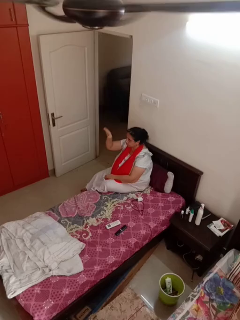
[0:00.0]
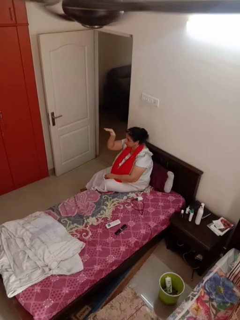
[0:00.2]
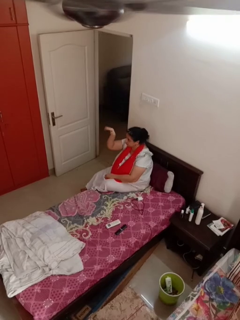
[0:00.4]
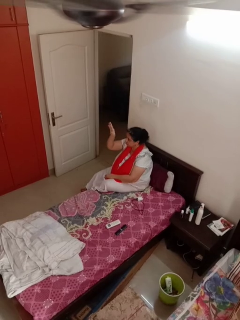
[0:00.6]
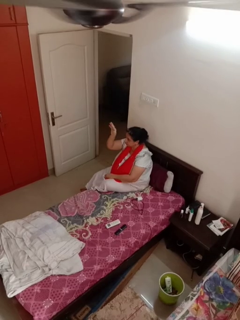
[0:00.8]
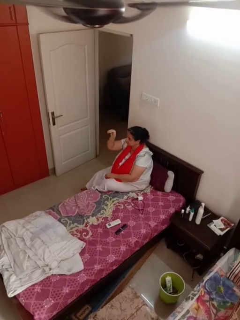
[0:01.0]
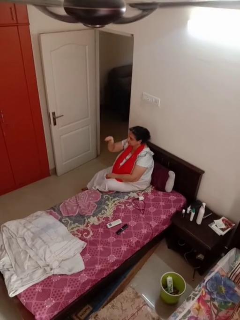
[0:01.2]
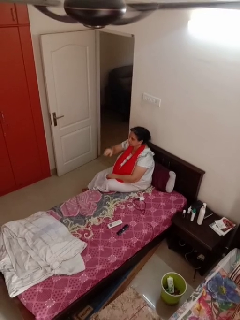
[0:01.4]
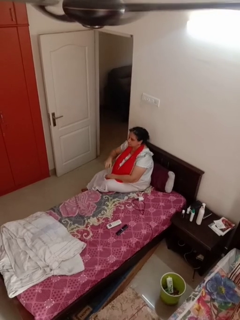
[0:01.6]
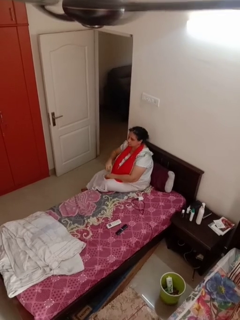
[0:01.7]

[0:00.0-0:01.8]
person gestures come here

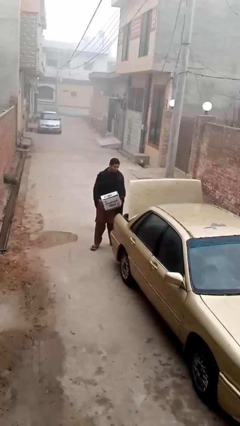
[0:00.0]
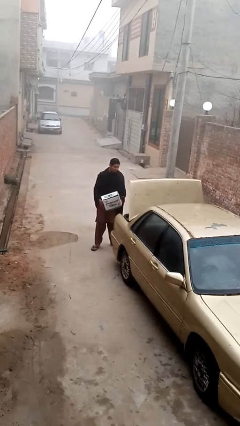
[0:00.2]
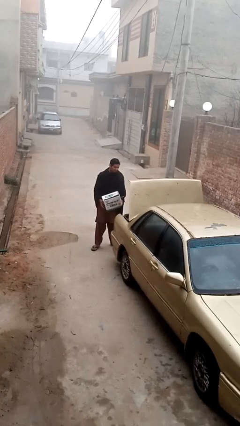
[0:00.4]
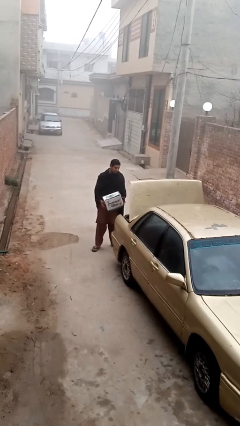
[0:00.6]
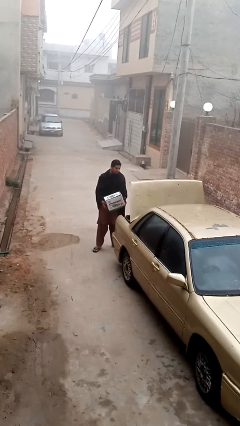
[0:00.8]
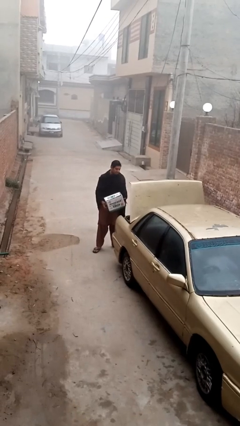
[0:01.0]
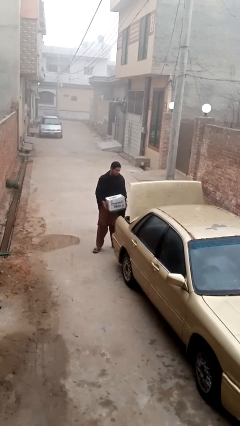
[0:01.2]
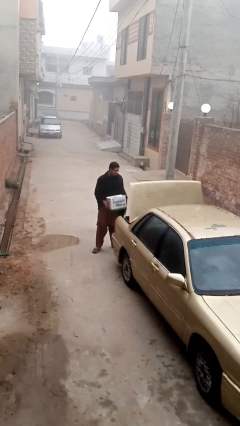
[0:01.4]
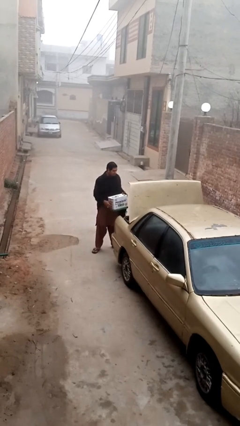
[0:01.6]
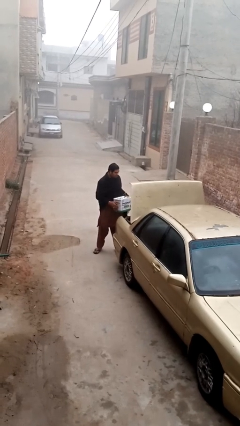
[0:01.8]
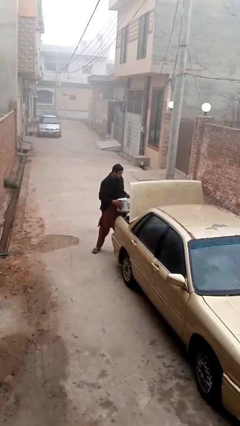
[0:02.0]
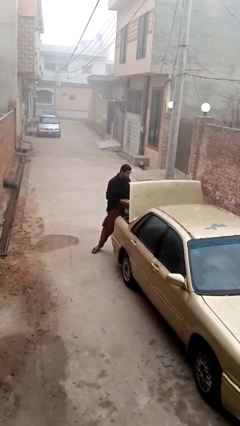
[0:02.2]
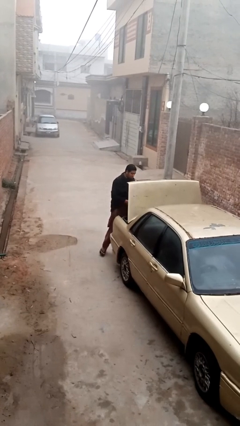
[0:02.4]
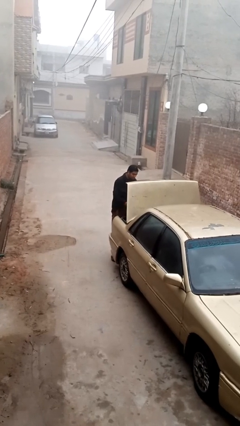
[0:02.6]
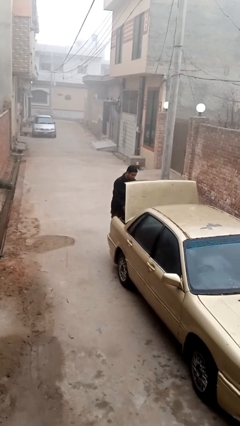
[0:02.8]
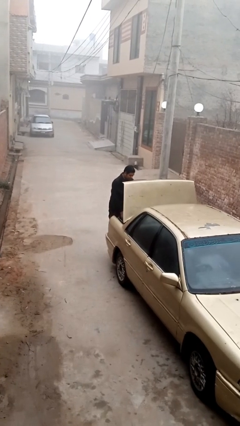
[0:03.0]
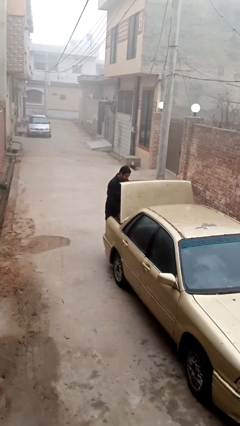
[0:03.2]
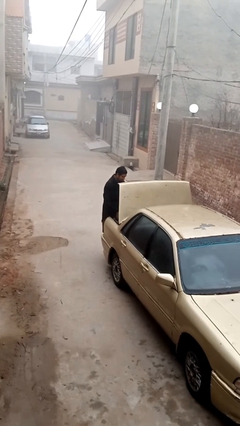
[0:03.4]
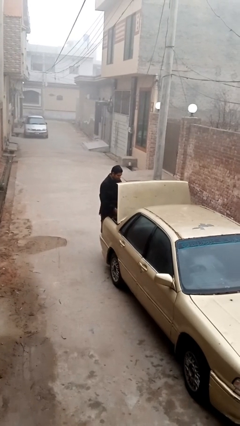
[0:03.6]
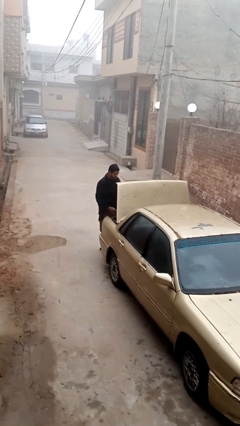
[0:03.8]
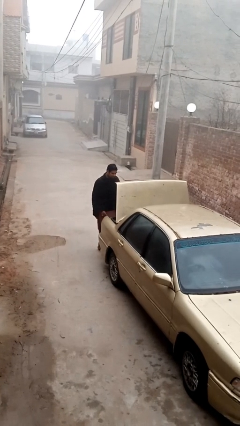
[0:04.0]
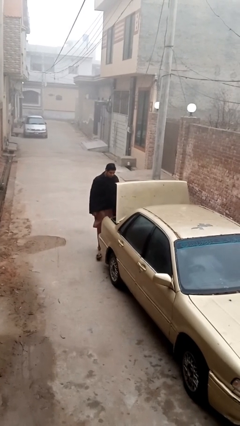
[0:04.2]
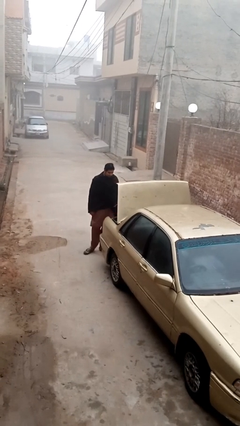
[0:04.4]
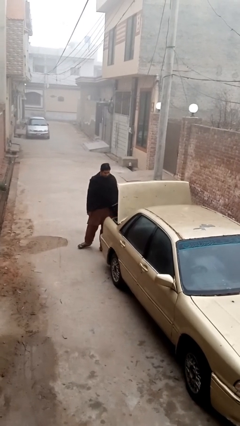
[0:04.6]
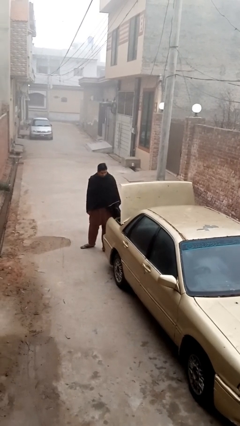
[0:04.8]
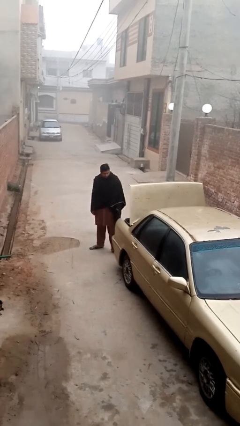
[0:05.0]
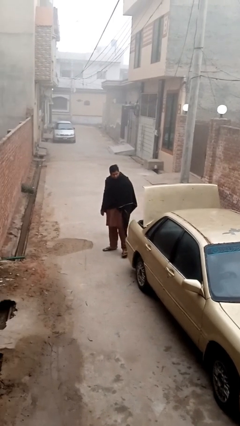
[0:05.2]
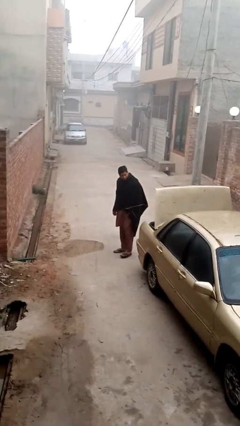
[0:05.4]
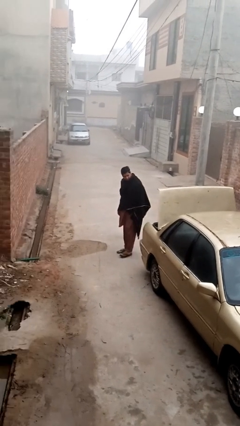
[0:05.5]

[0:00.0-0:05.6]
person loads car

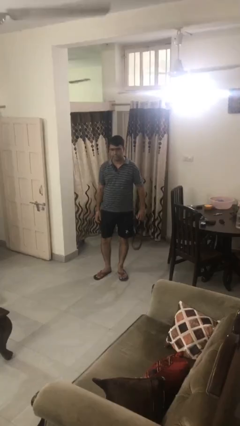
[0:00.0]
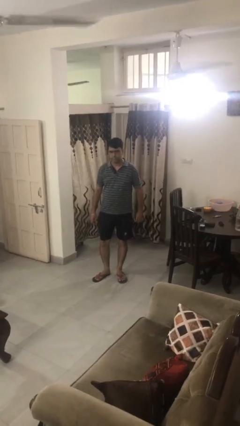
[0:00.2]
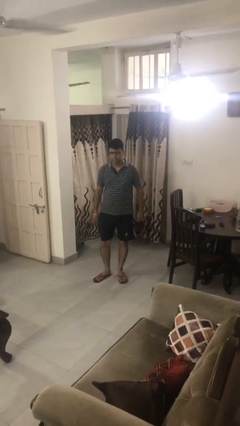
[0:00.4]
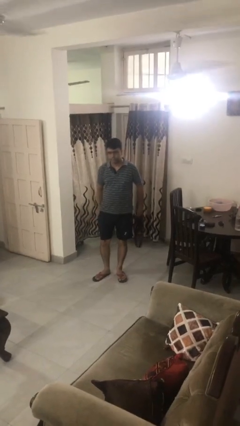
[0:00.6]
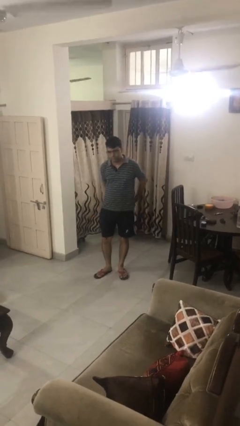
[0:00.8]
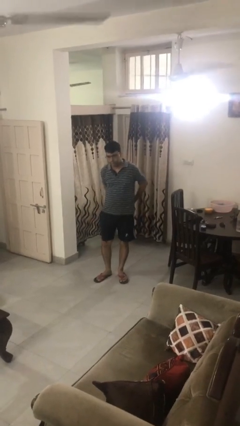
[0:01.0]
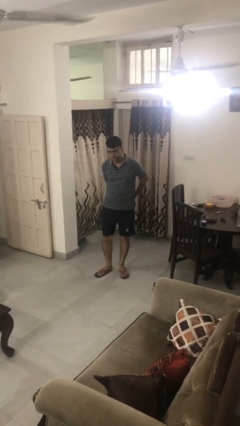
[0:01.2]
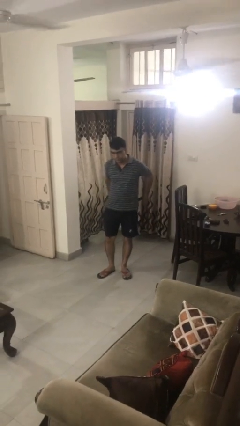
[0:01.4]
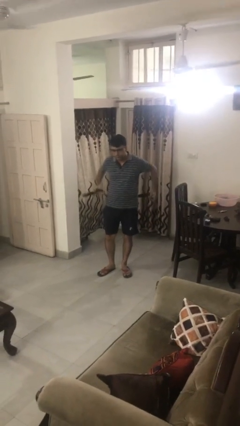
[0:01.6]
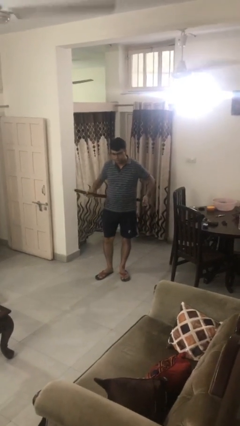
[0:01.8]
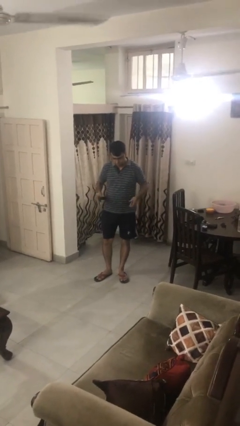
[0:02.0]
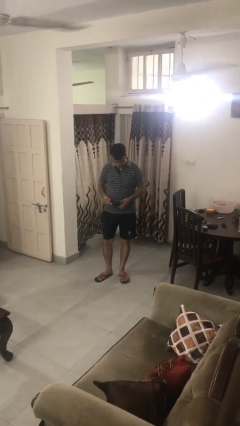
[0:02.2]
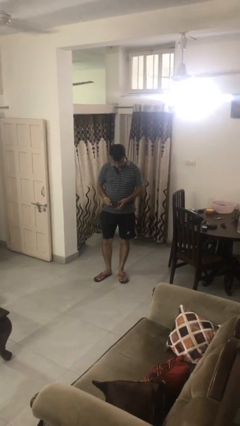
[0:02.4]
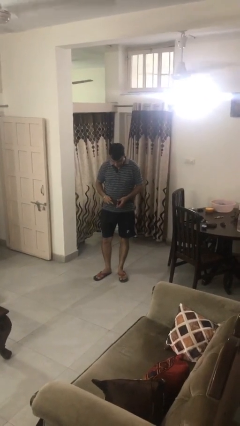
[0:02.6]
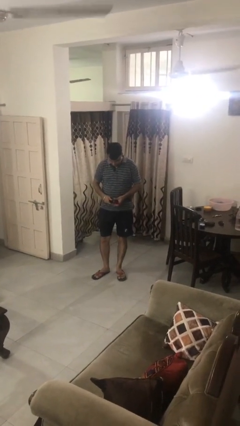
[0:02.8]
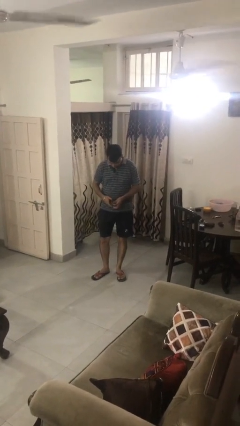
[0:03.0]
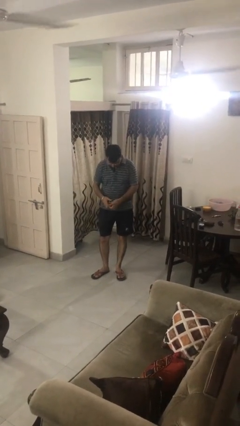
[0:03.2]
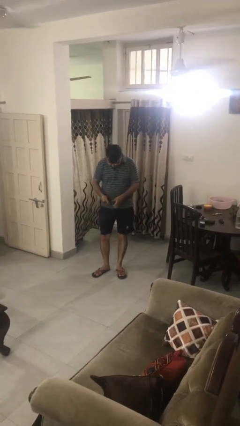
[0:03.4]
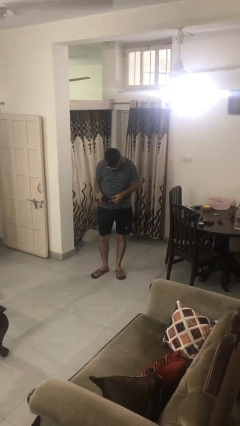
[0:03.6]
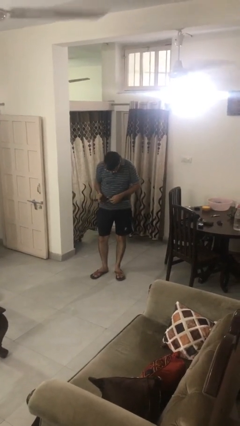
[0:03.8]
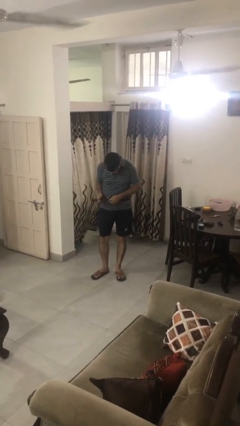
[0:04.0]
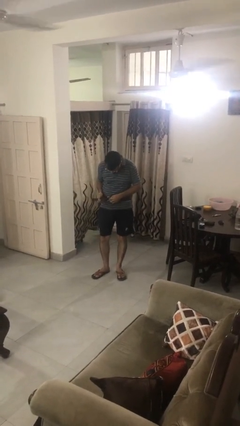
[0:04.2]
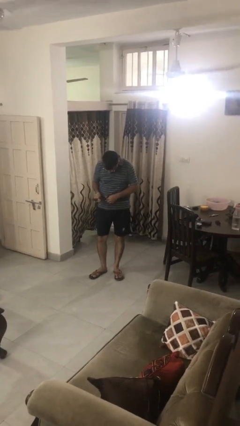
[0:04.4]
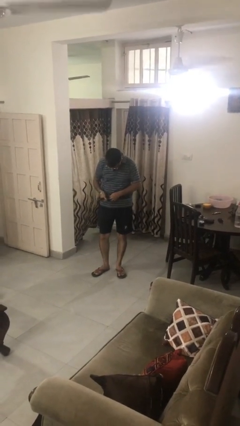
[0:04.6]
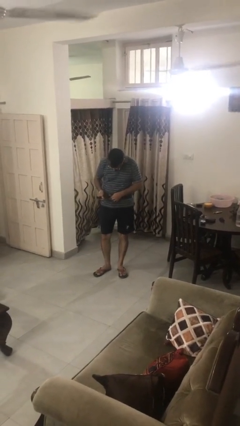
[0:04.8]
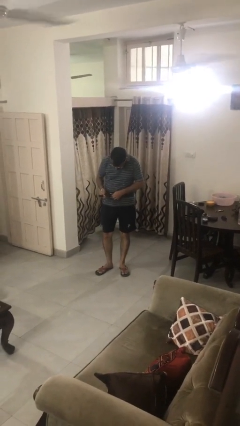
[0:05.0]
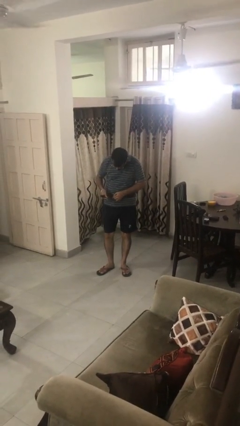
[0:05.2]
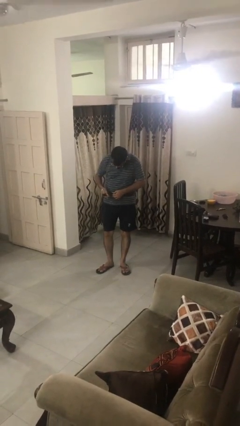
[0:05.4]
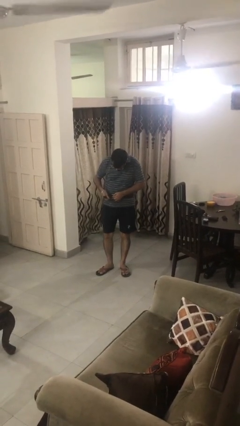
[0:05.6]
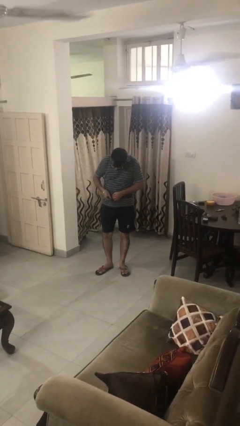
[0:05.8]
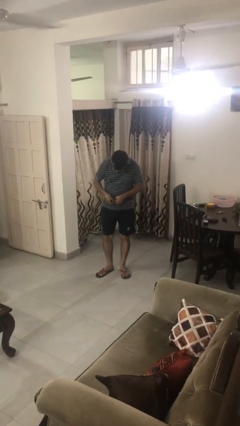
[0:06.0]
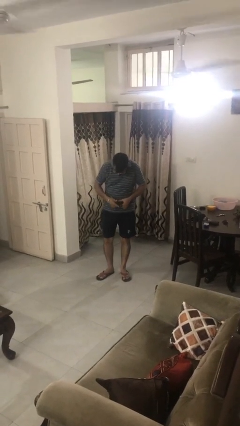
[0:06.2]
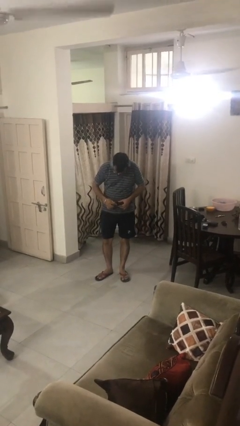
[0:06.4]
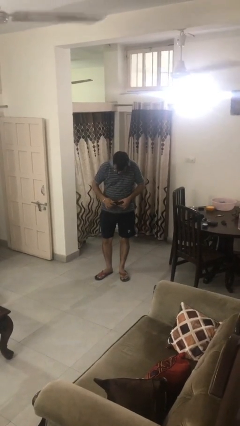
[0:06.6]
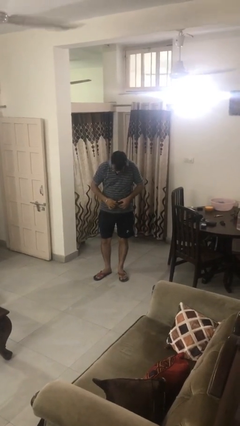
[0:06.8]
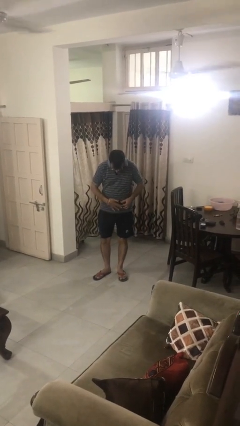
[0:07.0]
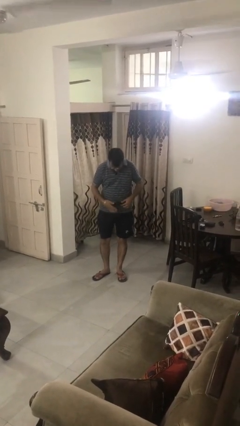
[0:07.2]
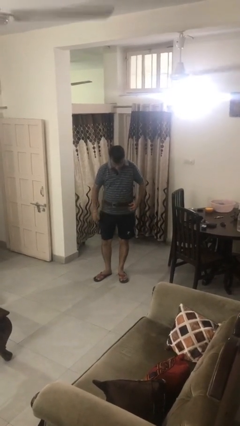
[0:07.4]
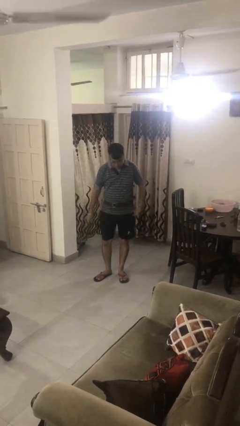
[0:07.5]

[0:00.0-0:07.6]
person puts on belt

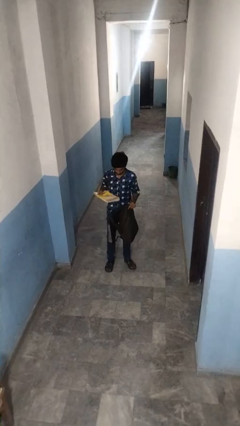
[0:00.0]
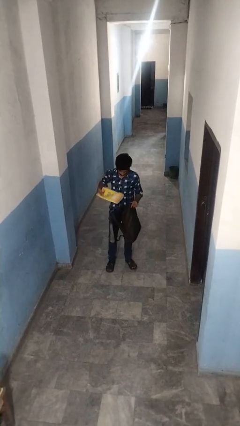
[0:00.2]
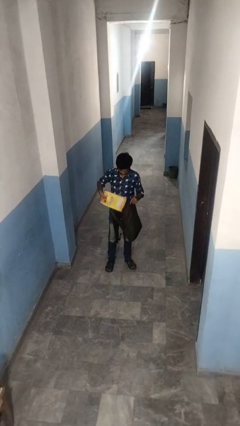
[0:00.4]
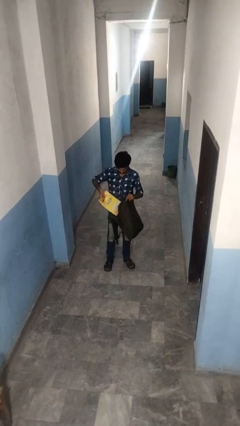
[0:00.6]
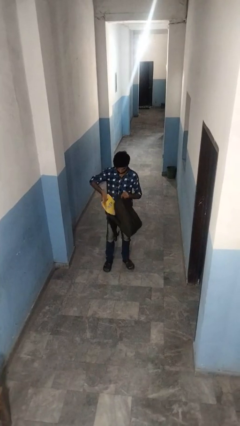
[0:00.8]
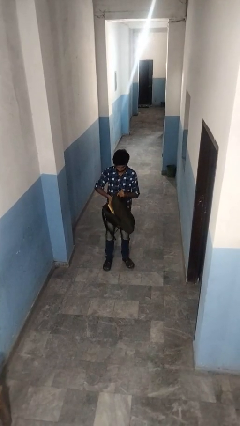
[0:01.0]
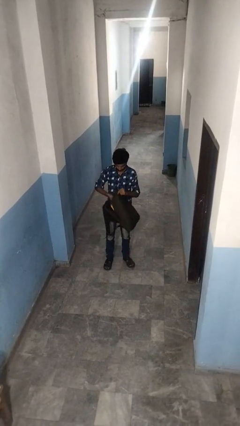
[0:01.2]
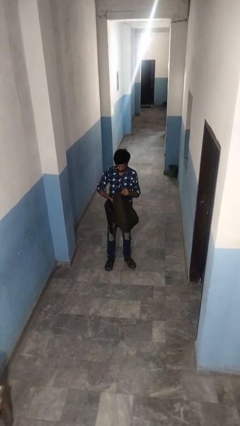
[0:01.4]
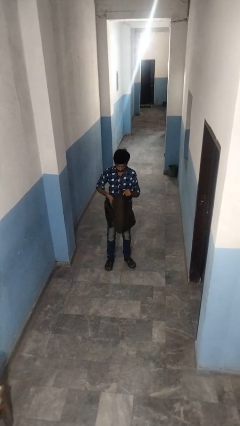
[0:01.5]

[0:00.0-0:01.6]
person puts object into backpack

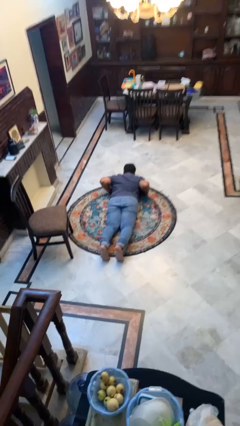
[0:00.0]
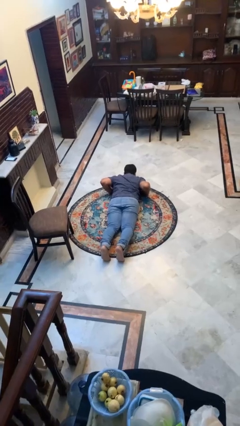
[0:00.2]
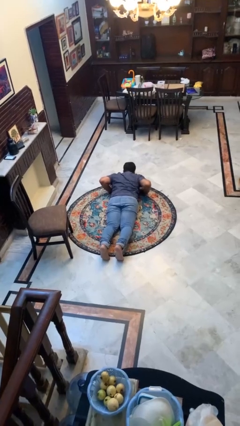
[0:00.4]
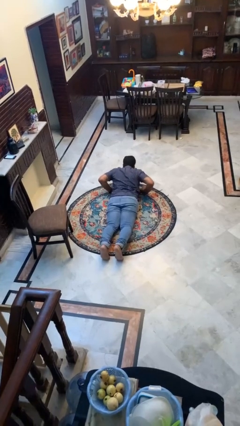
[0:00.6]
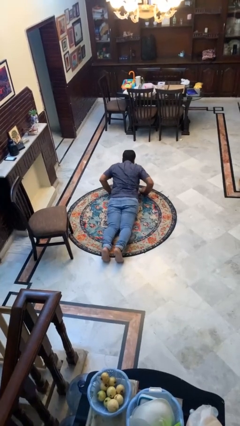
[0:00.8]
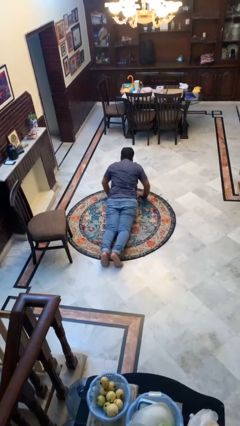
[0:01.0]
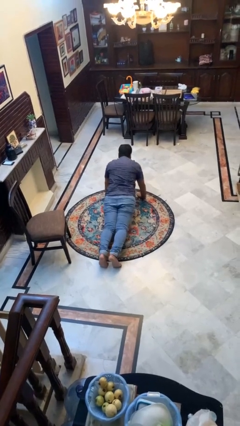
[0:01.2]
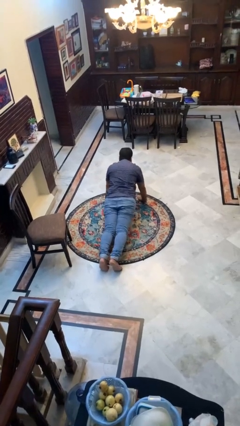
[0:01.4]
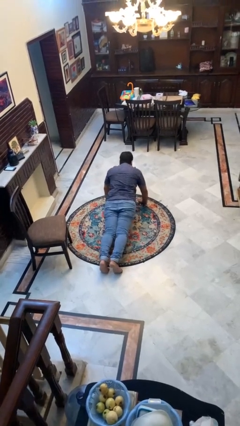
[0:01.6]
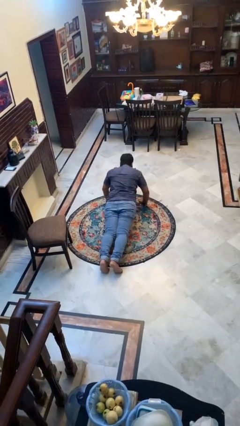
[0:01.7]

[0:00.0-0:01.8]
person exercises with pushup
